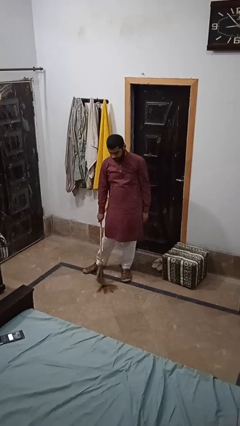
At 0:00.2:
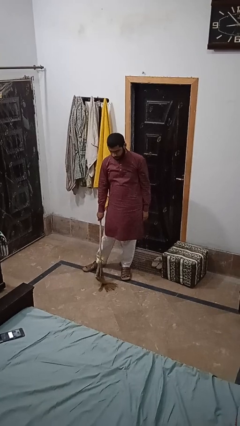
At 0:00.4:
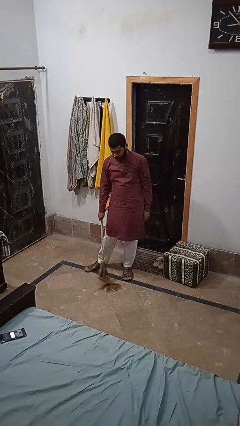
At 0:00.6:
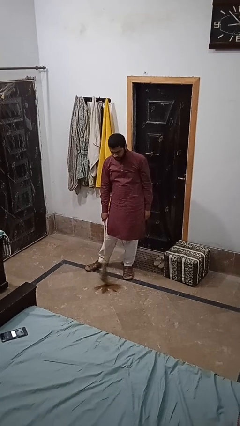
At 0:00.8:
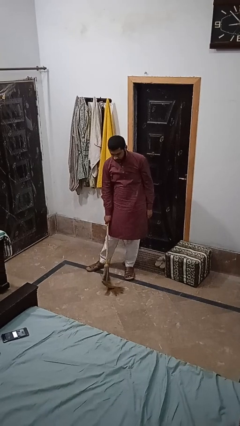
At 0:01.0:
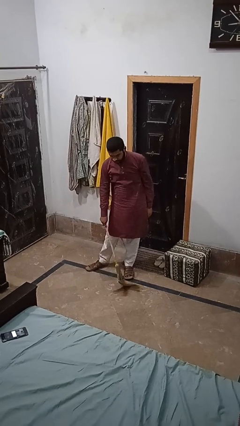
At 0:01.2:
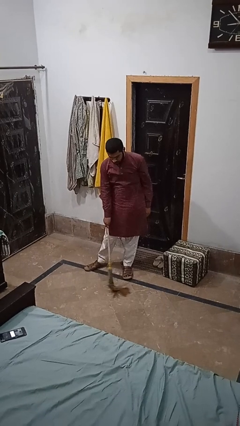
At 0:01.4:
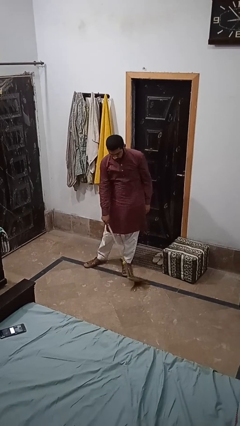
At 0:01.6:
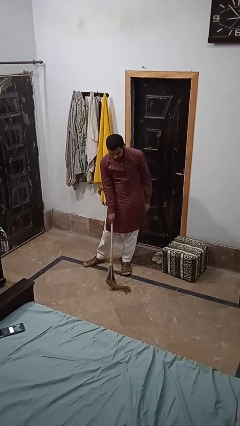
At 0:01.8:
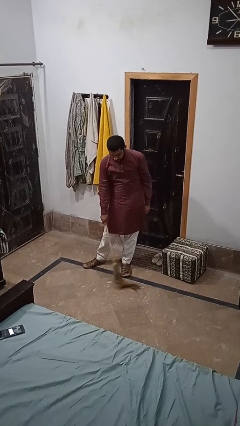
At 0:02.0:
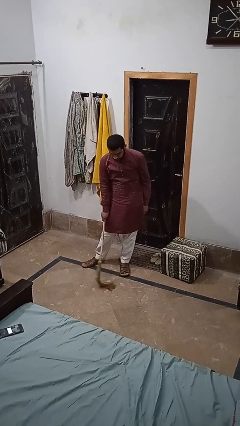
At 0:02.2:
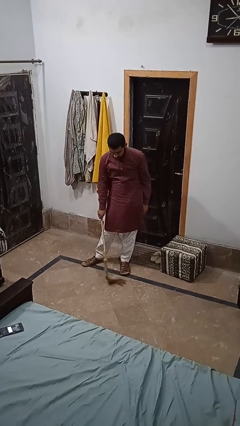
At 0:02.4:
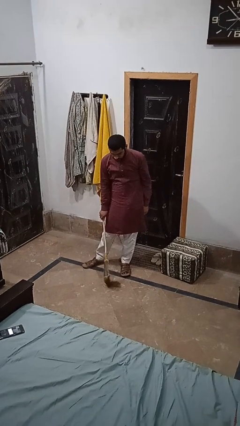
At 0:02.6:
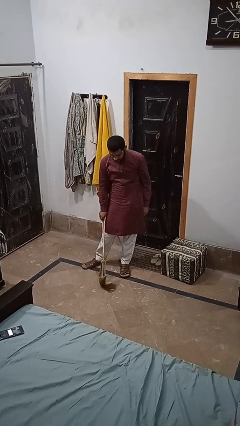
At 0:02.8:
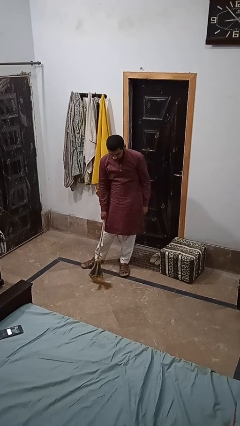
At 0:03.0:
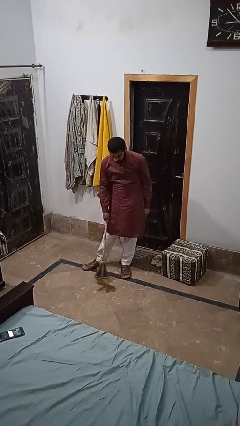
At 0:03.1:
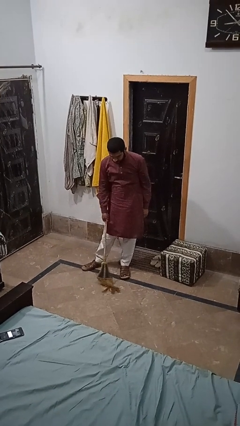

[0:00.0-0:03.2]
person mops

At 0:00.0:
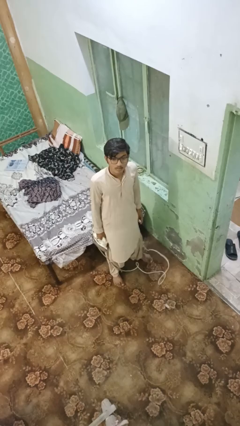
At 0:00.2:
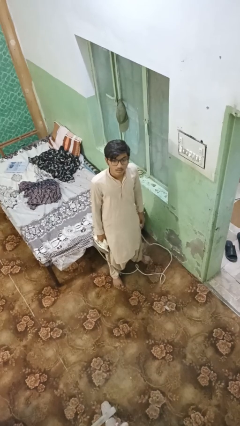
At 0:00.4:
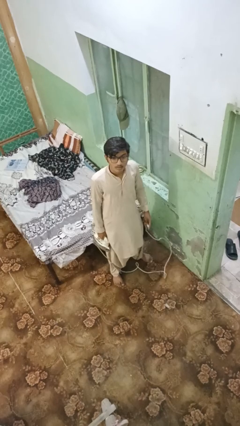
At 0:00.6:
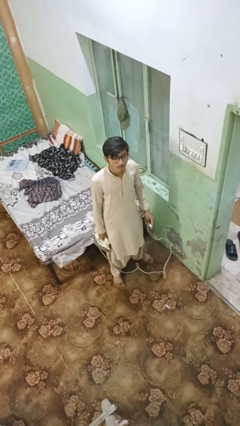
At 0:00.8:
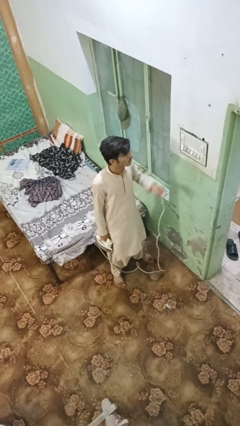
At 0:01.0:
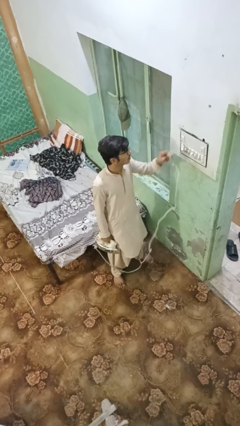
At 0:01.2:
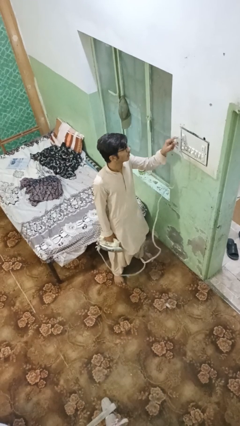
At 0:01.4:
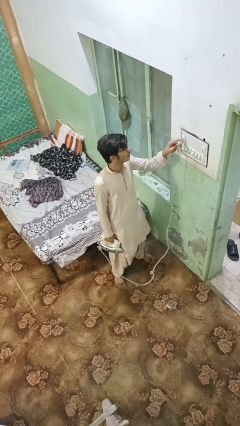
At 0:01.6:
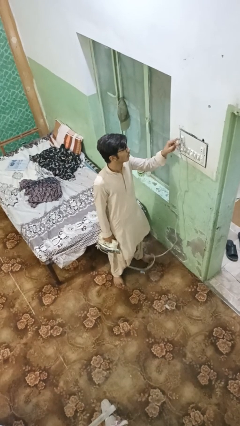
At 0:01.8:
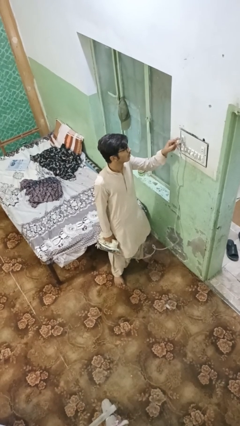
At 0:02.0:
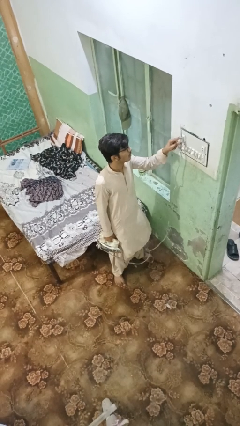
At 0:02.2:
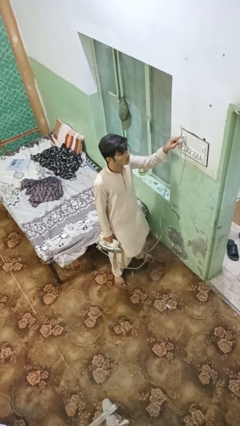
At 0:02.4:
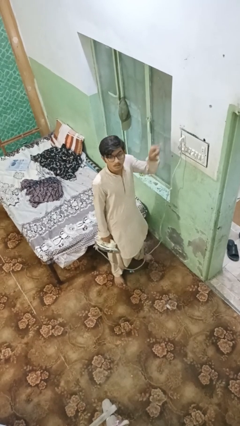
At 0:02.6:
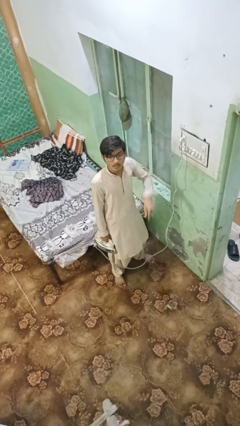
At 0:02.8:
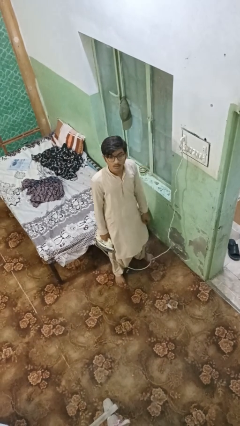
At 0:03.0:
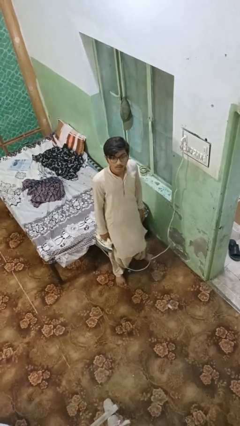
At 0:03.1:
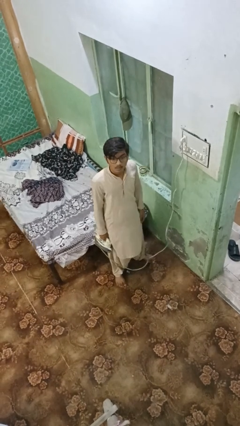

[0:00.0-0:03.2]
person plugs into electrical socket

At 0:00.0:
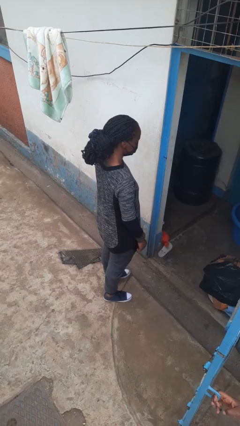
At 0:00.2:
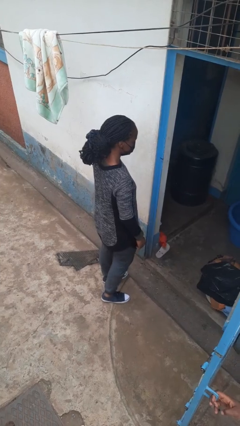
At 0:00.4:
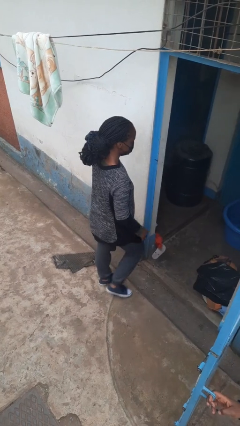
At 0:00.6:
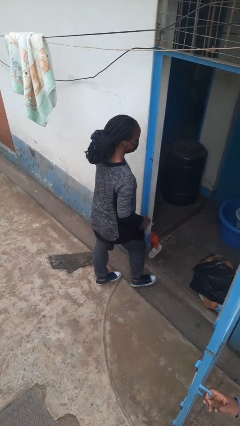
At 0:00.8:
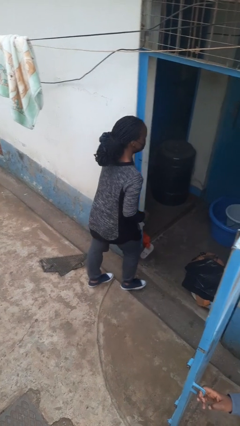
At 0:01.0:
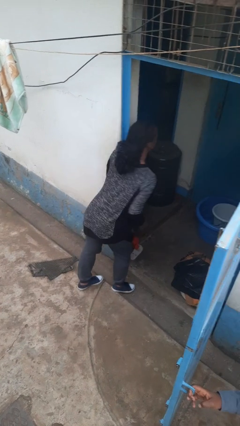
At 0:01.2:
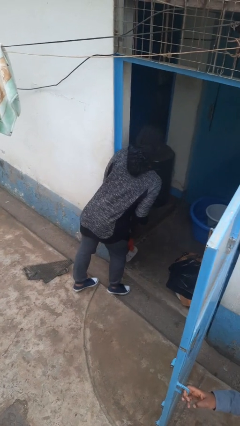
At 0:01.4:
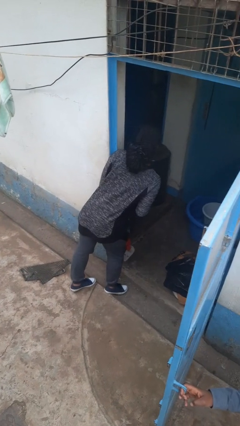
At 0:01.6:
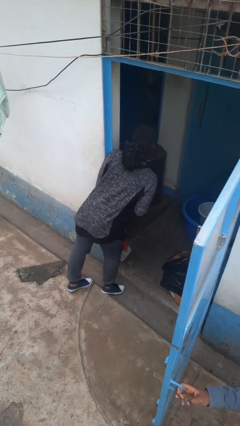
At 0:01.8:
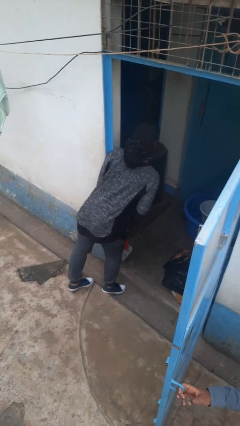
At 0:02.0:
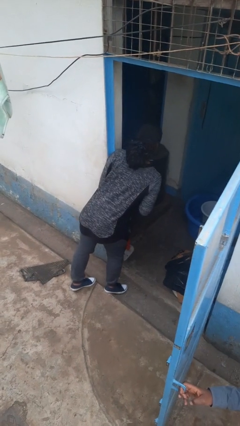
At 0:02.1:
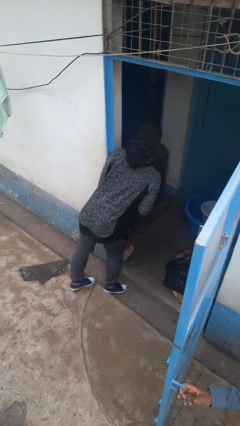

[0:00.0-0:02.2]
person bumps into wall

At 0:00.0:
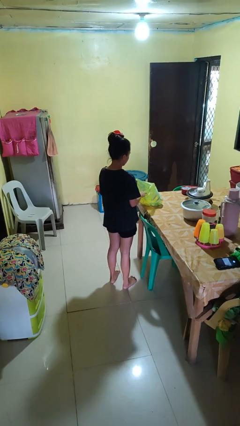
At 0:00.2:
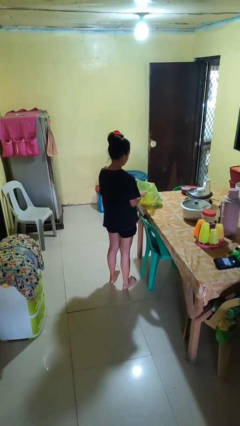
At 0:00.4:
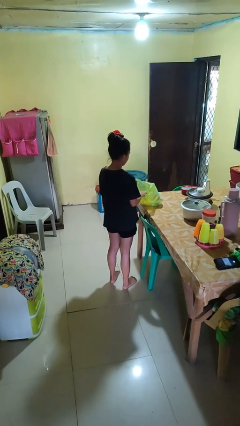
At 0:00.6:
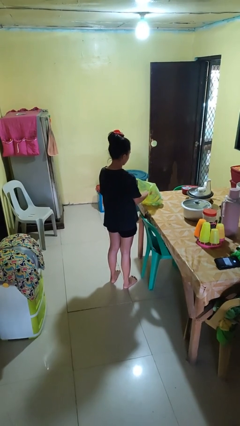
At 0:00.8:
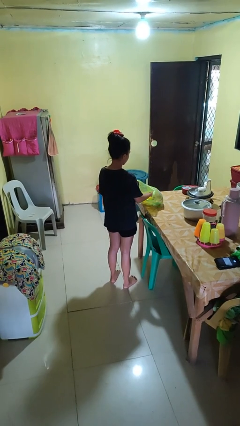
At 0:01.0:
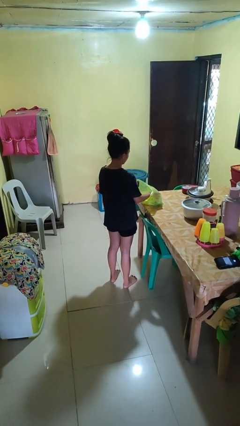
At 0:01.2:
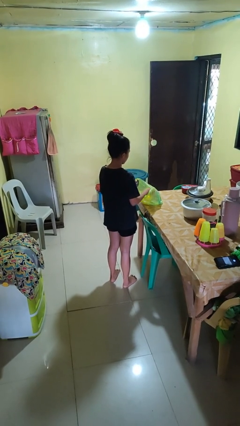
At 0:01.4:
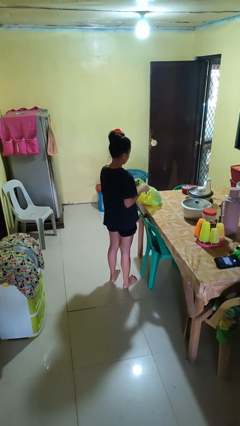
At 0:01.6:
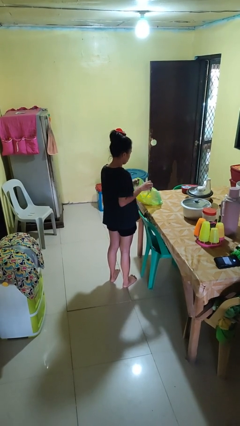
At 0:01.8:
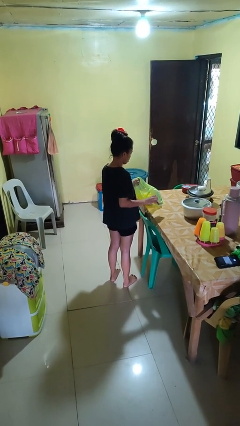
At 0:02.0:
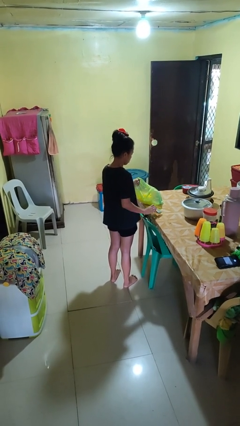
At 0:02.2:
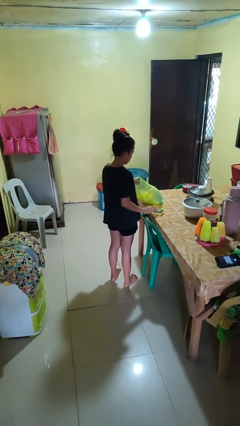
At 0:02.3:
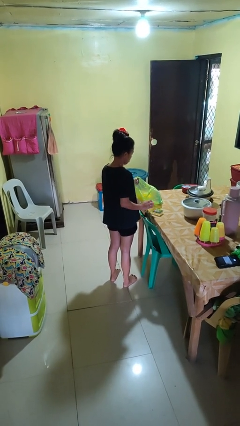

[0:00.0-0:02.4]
person takes object from bag

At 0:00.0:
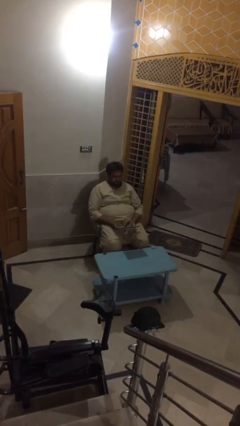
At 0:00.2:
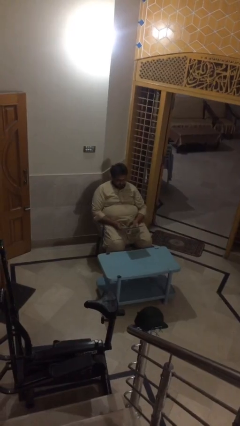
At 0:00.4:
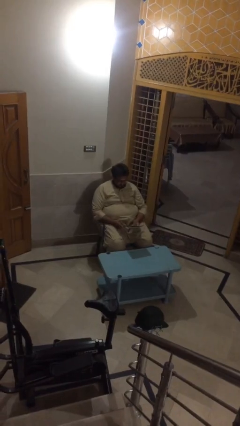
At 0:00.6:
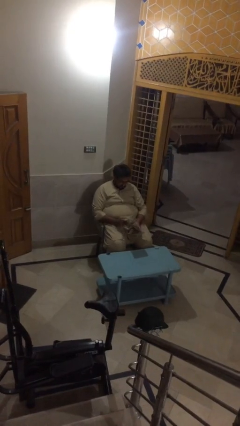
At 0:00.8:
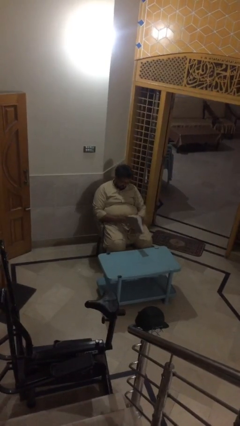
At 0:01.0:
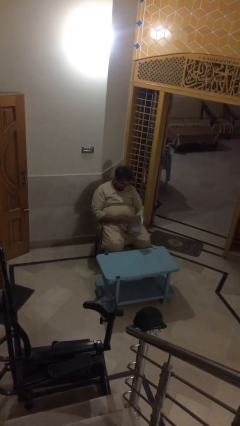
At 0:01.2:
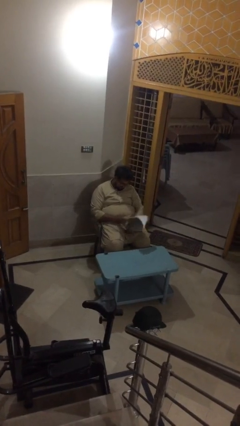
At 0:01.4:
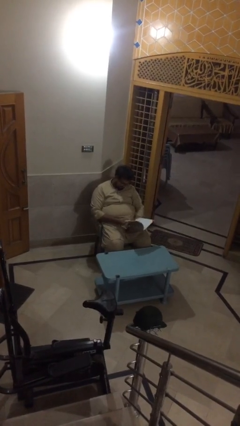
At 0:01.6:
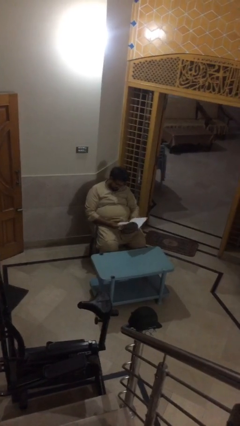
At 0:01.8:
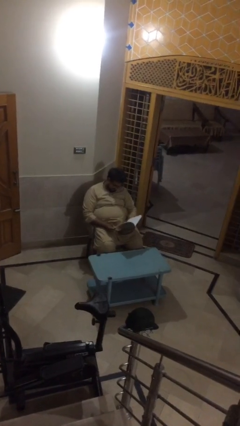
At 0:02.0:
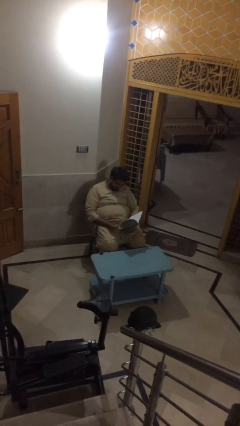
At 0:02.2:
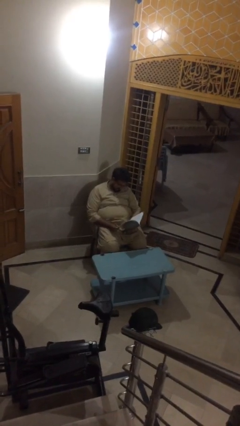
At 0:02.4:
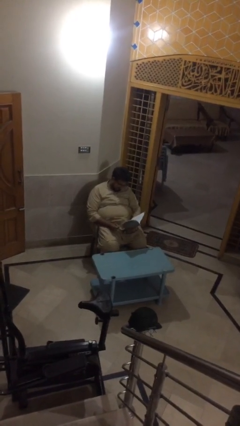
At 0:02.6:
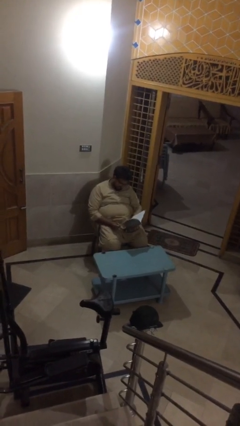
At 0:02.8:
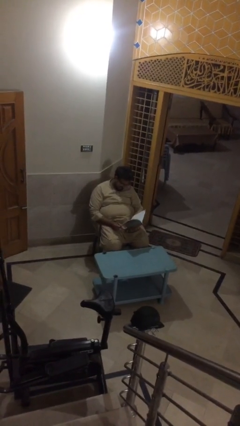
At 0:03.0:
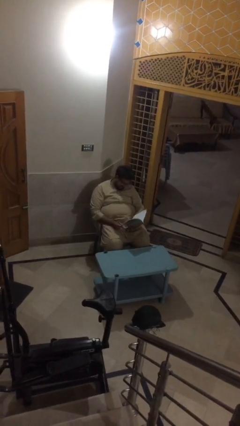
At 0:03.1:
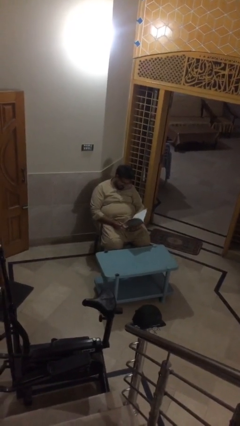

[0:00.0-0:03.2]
person reads document

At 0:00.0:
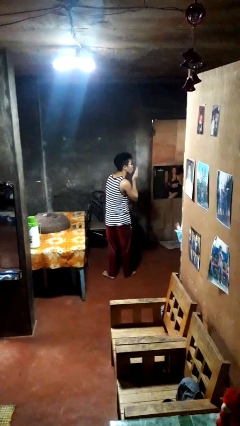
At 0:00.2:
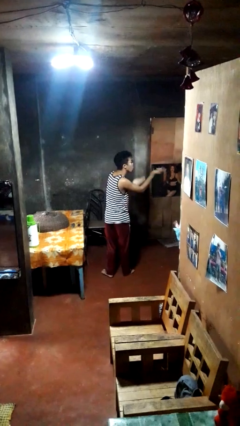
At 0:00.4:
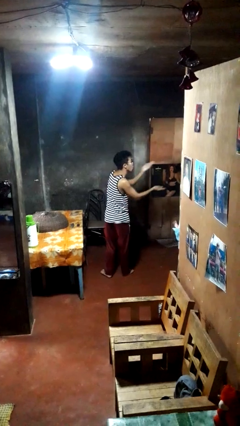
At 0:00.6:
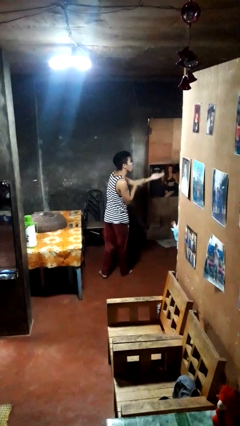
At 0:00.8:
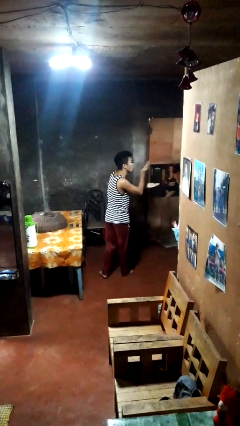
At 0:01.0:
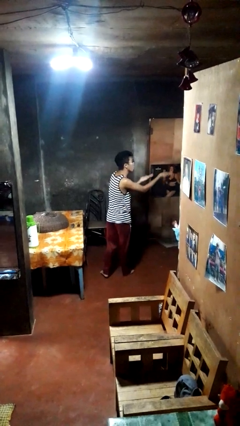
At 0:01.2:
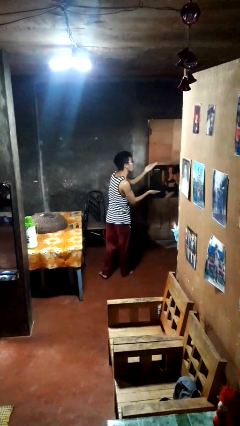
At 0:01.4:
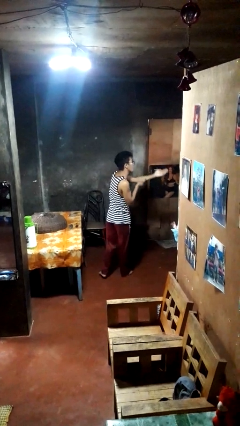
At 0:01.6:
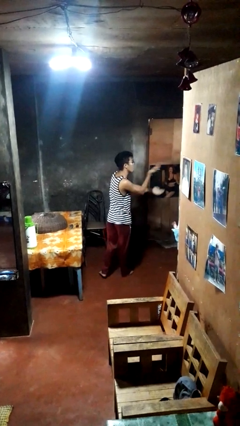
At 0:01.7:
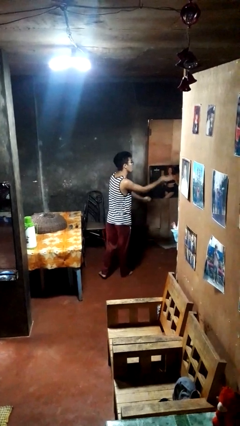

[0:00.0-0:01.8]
person gestures blow kiss

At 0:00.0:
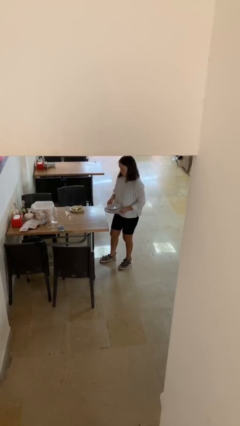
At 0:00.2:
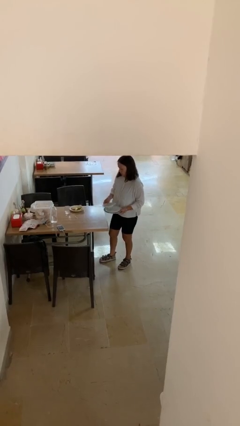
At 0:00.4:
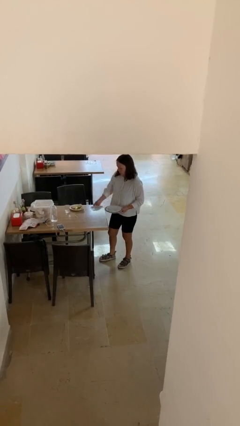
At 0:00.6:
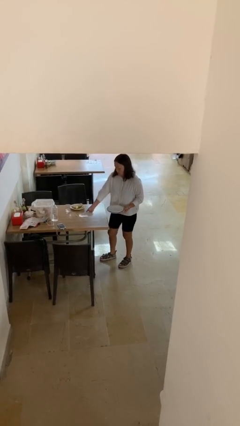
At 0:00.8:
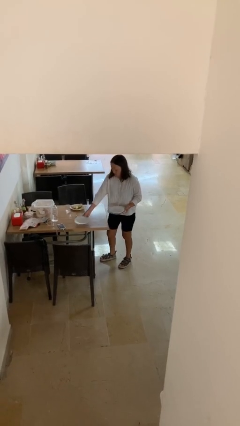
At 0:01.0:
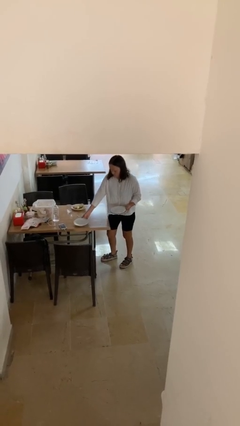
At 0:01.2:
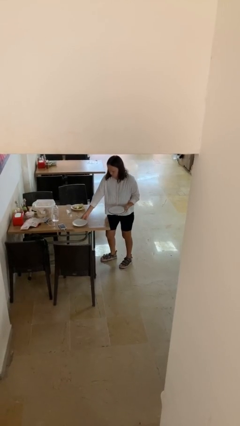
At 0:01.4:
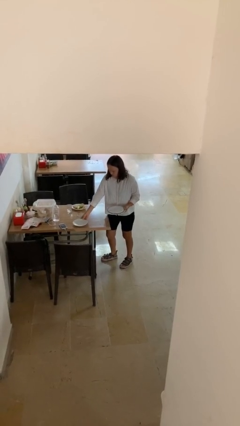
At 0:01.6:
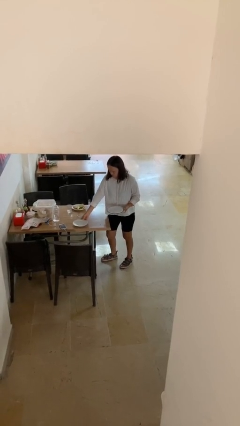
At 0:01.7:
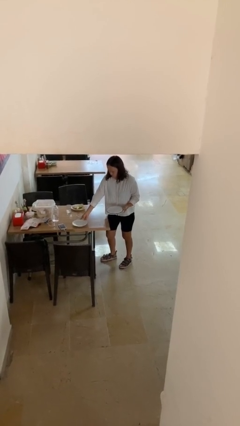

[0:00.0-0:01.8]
person sets table
